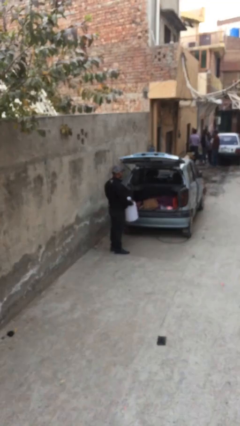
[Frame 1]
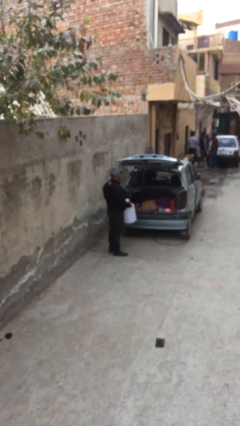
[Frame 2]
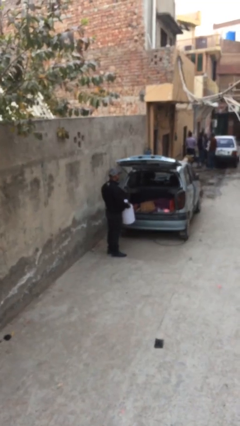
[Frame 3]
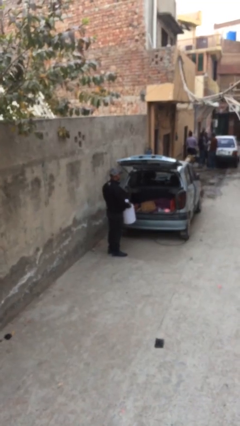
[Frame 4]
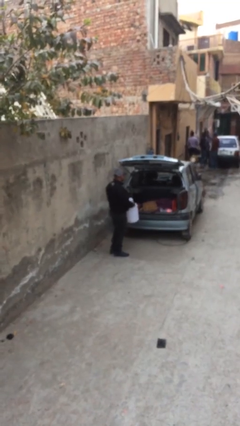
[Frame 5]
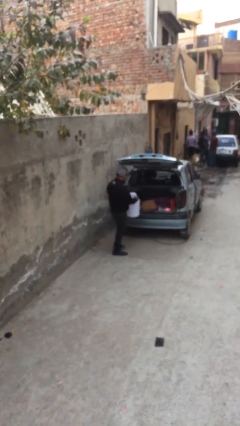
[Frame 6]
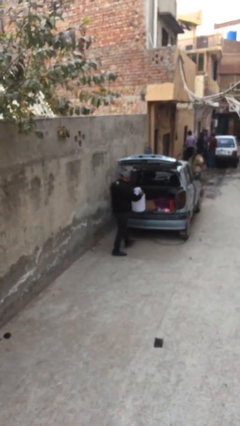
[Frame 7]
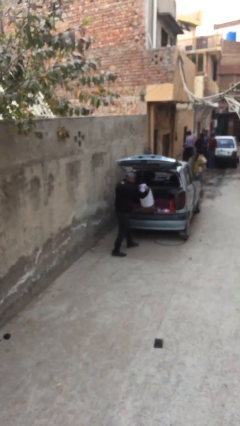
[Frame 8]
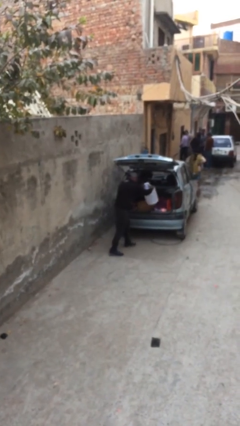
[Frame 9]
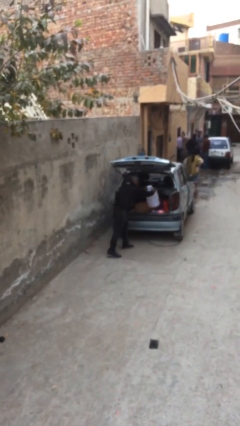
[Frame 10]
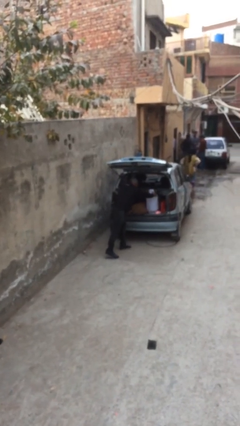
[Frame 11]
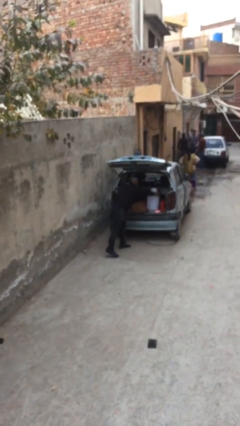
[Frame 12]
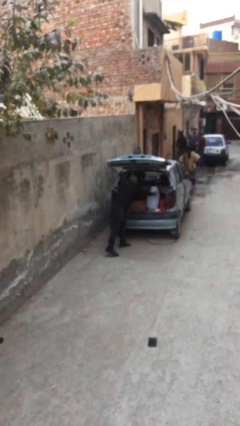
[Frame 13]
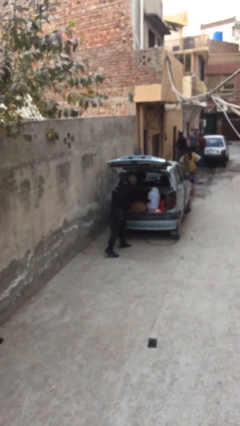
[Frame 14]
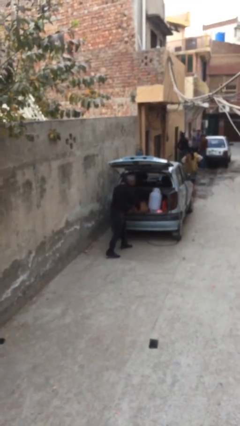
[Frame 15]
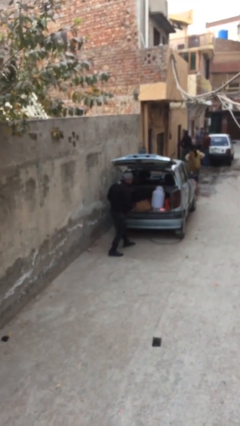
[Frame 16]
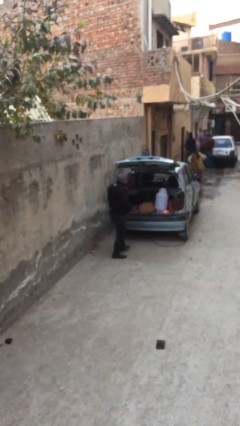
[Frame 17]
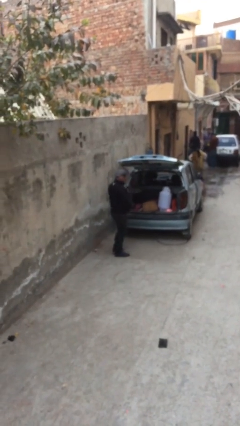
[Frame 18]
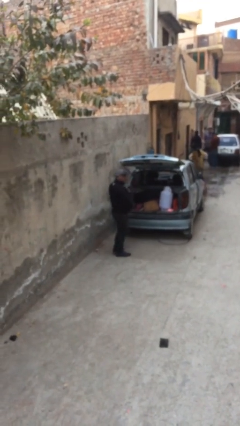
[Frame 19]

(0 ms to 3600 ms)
person loads car

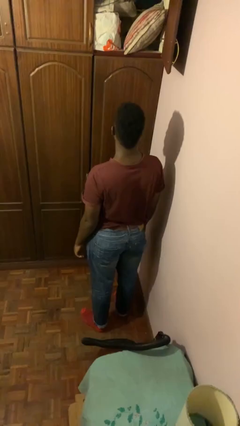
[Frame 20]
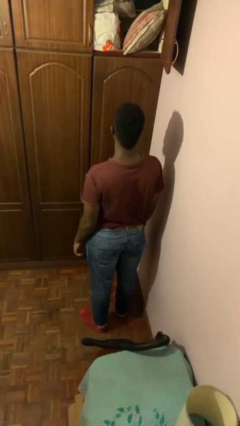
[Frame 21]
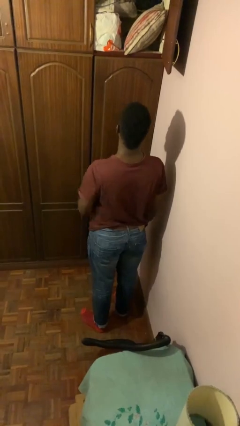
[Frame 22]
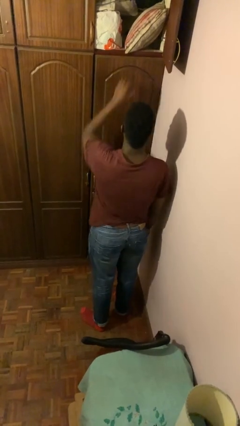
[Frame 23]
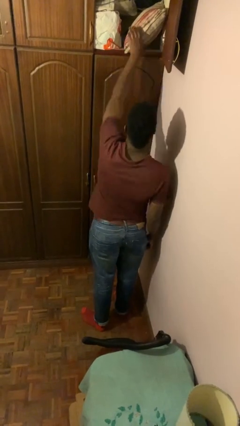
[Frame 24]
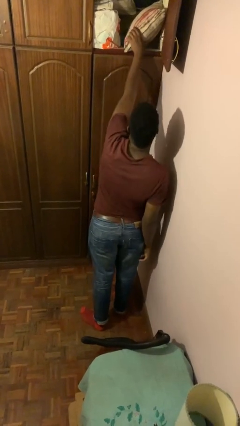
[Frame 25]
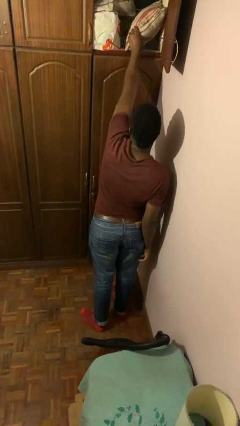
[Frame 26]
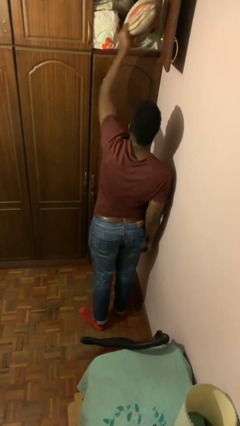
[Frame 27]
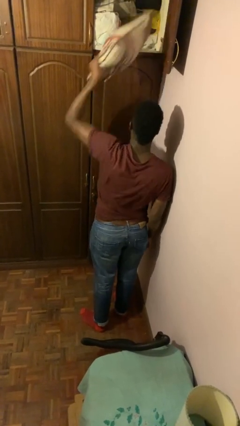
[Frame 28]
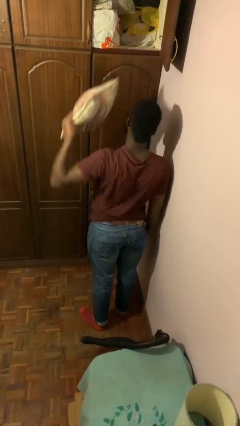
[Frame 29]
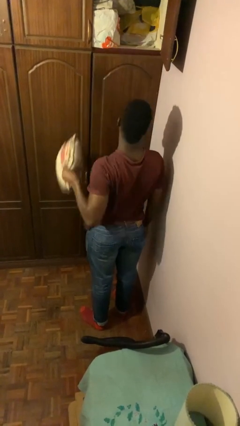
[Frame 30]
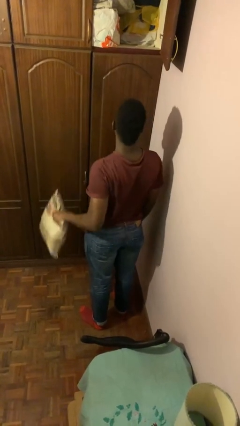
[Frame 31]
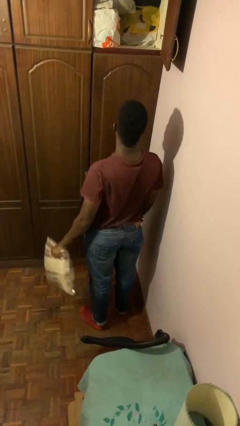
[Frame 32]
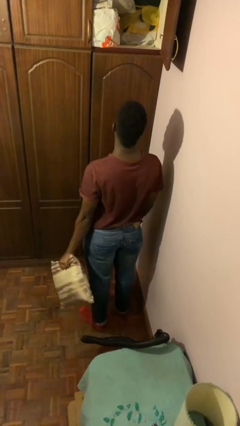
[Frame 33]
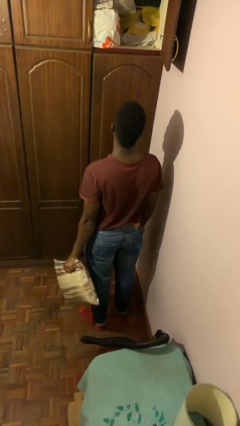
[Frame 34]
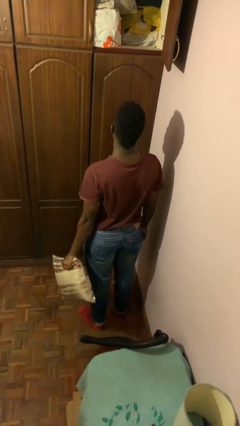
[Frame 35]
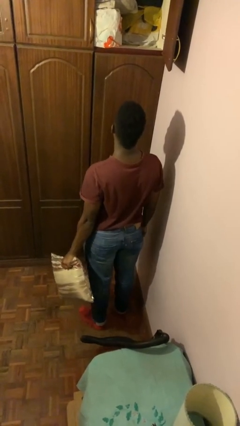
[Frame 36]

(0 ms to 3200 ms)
person picks up object from shelf

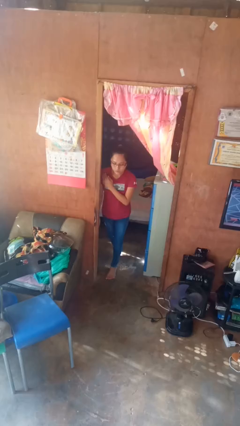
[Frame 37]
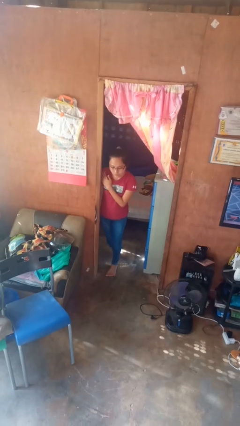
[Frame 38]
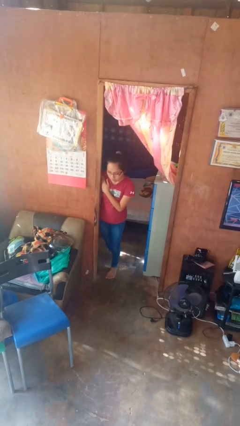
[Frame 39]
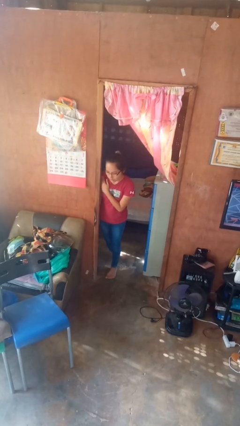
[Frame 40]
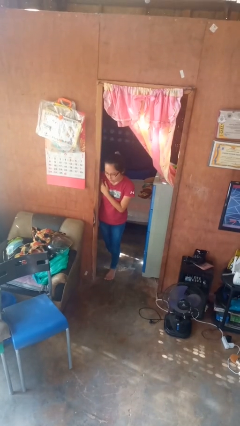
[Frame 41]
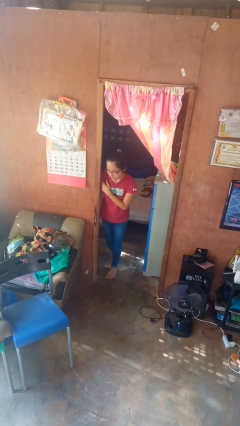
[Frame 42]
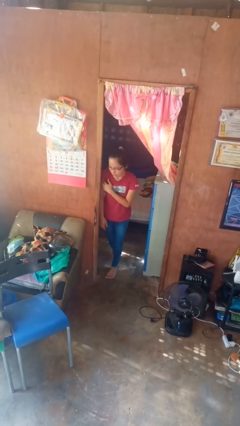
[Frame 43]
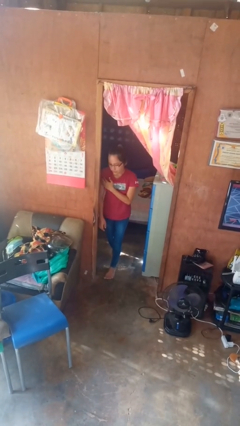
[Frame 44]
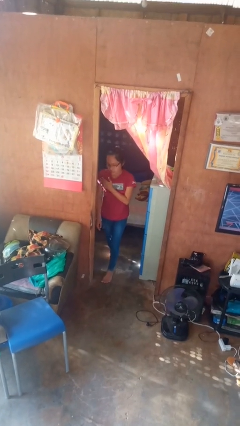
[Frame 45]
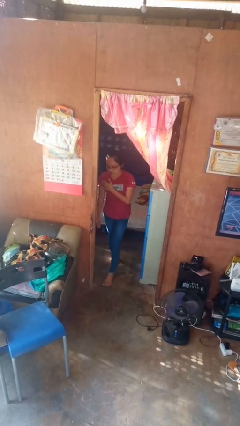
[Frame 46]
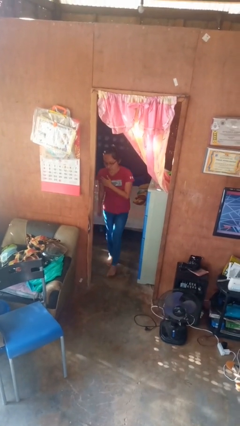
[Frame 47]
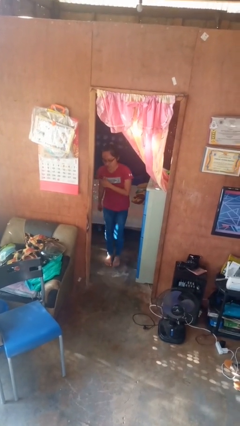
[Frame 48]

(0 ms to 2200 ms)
person bumps into wall

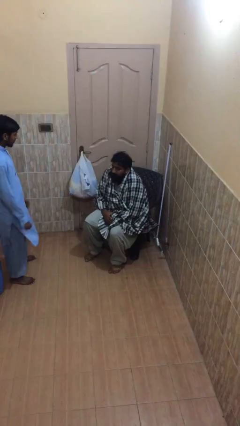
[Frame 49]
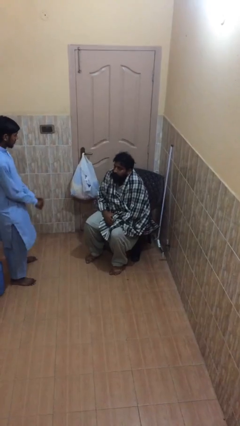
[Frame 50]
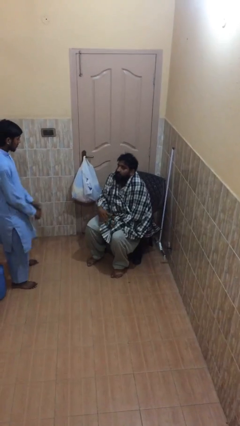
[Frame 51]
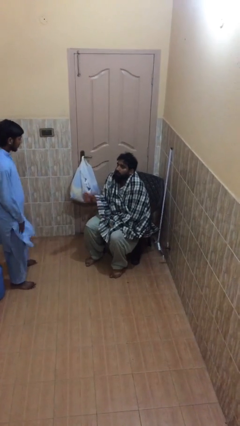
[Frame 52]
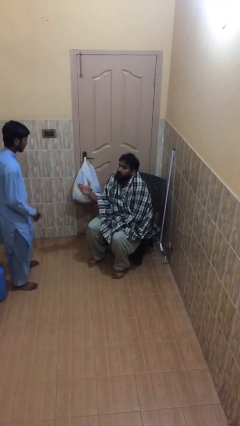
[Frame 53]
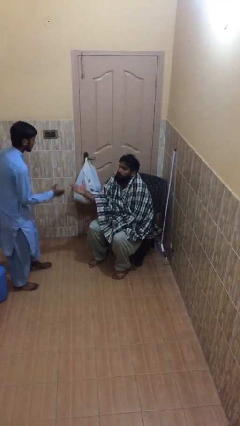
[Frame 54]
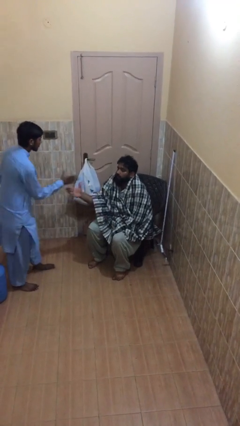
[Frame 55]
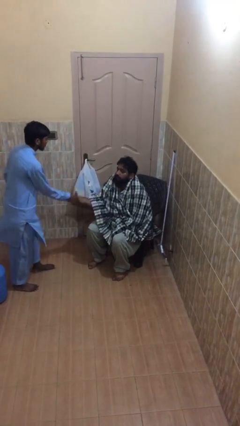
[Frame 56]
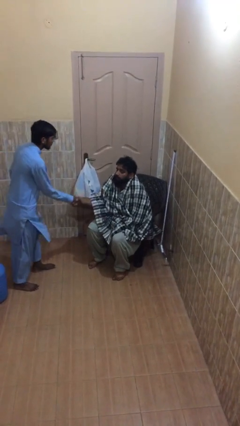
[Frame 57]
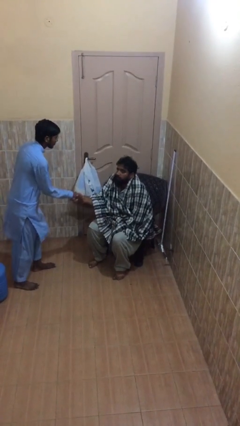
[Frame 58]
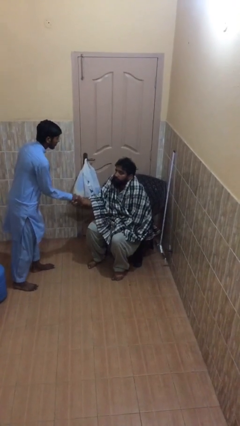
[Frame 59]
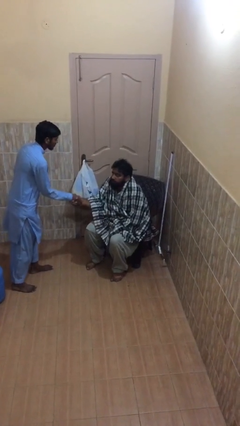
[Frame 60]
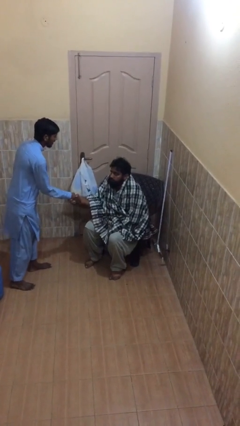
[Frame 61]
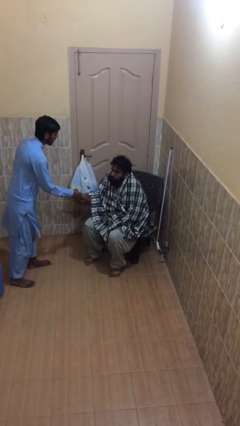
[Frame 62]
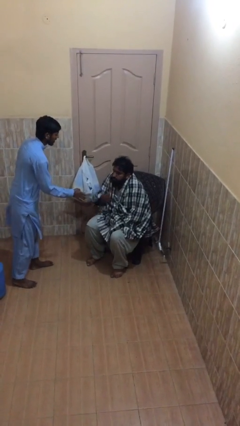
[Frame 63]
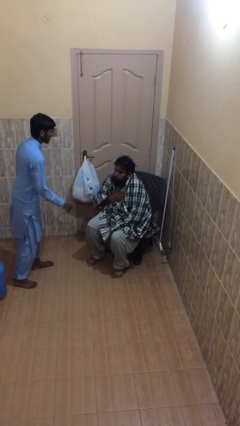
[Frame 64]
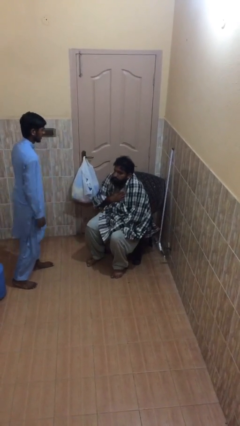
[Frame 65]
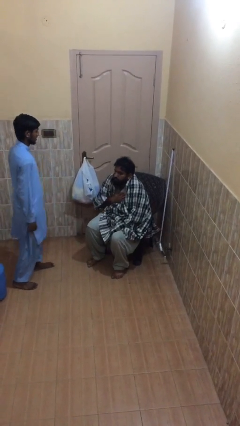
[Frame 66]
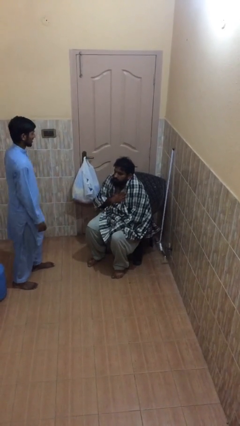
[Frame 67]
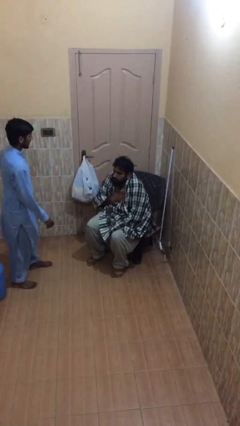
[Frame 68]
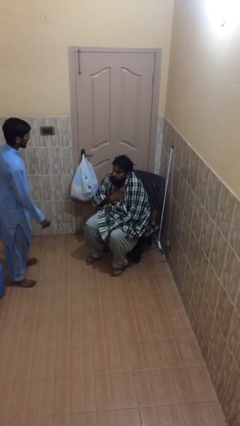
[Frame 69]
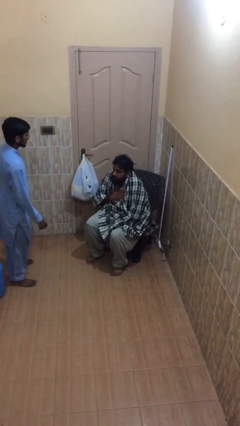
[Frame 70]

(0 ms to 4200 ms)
person shakes hand

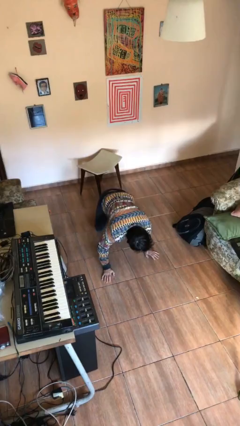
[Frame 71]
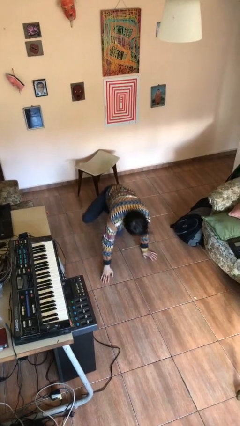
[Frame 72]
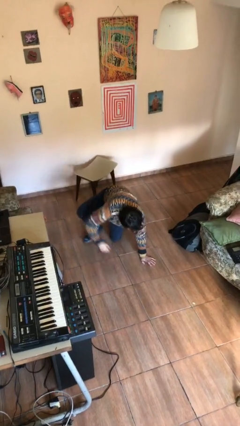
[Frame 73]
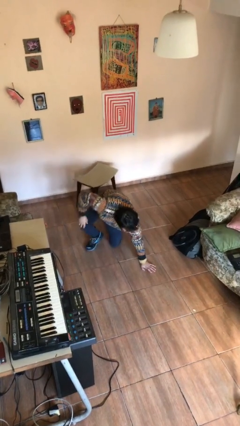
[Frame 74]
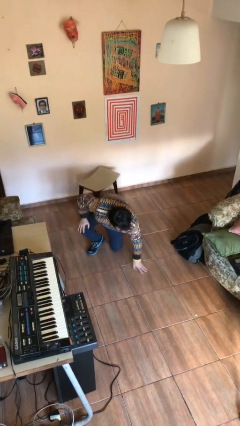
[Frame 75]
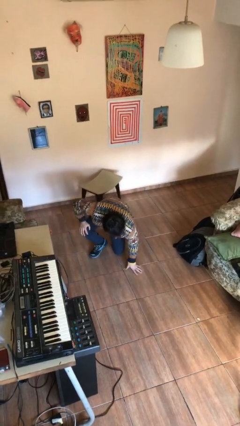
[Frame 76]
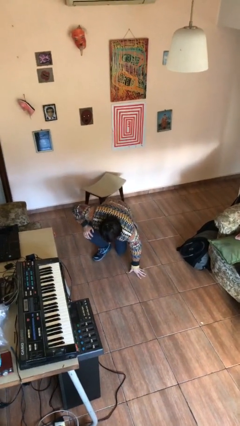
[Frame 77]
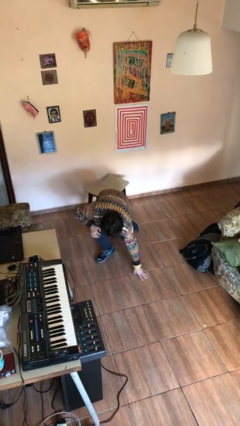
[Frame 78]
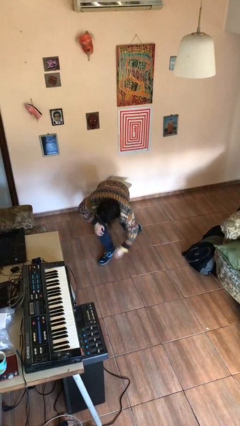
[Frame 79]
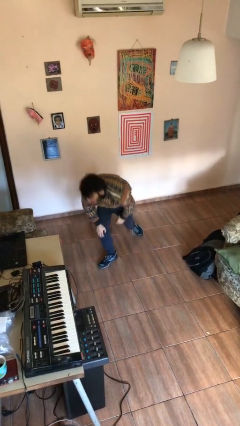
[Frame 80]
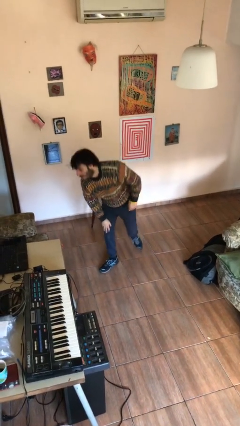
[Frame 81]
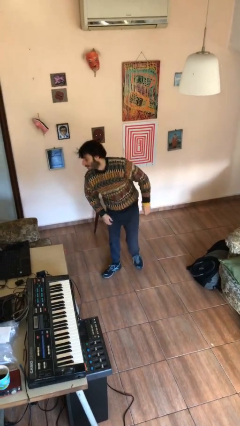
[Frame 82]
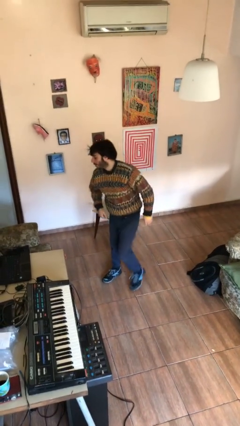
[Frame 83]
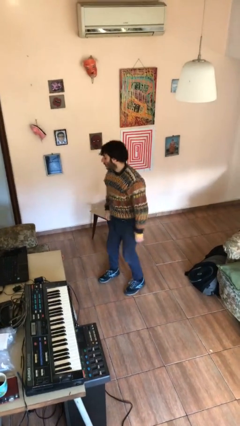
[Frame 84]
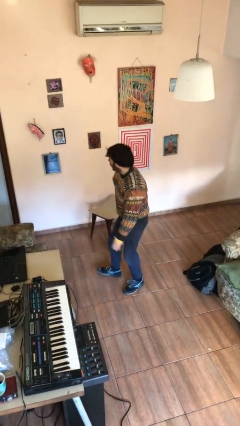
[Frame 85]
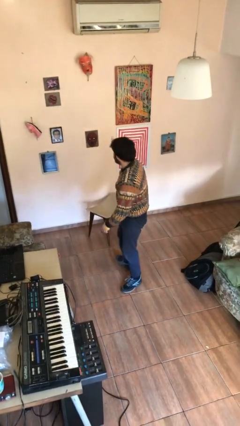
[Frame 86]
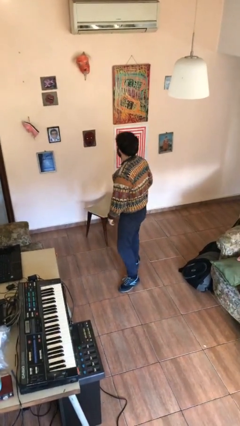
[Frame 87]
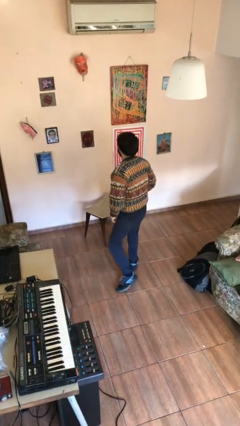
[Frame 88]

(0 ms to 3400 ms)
person stands up from floor

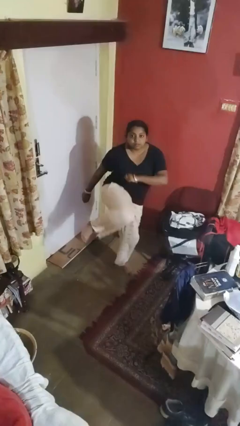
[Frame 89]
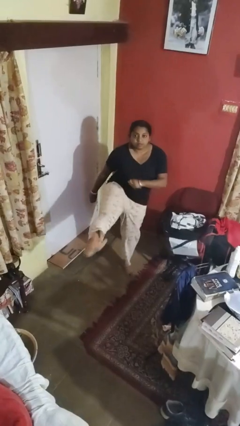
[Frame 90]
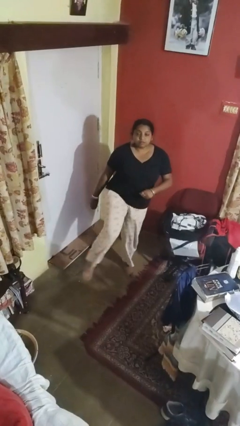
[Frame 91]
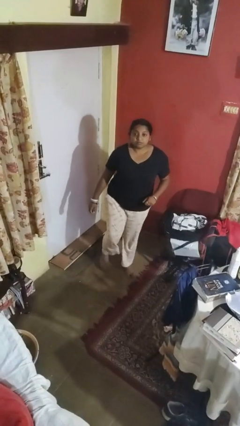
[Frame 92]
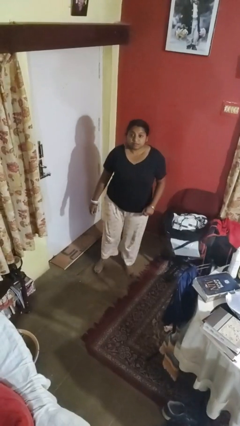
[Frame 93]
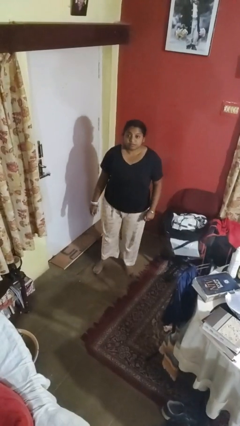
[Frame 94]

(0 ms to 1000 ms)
person karate kicks
